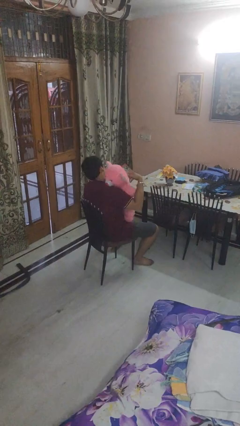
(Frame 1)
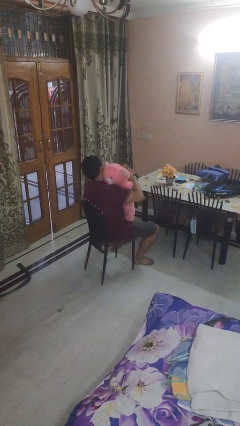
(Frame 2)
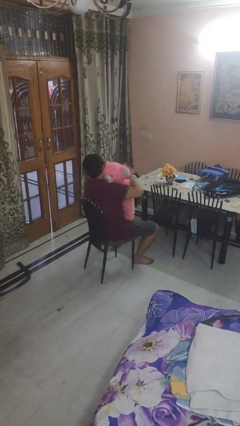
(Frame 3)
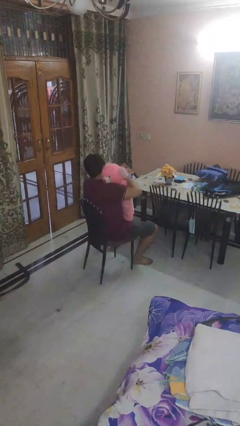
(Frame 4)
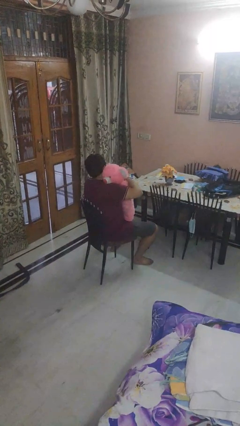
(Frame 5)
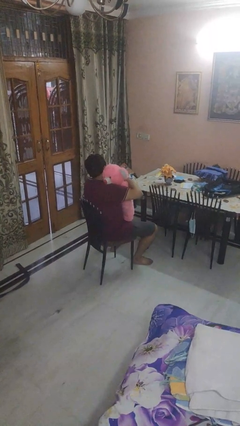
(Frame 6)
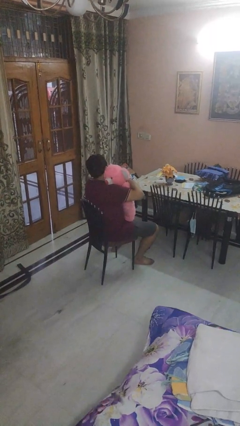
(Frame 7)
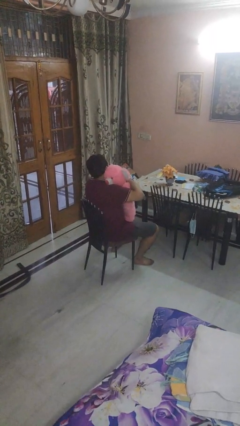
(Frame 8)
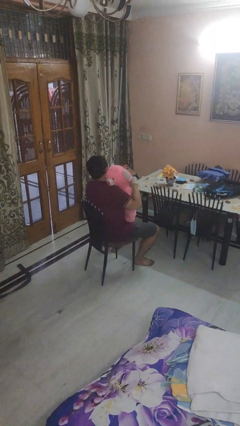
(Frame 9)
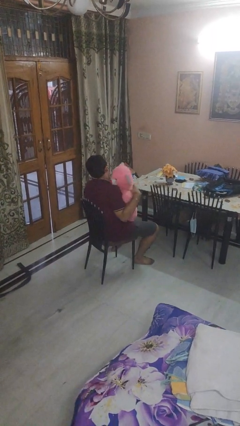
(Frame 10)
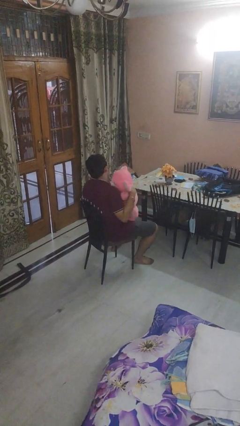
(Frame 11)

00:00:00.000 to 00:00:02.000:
person hugs stuffed animal

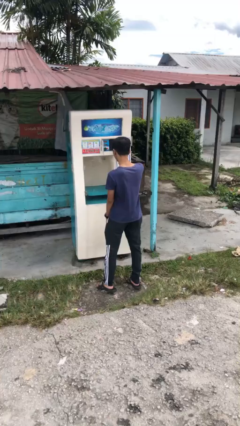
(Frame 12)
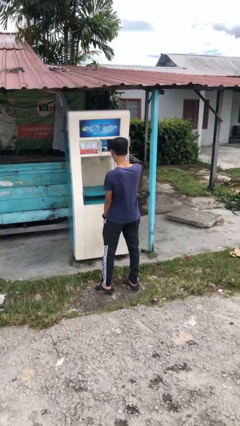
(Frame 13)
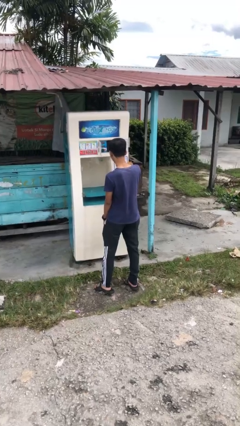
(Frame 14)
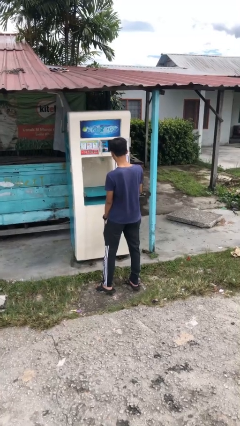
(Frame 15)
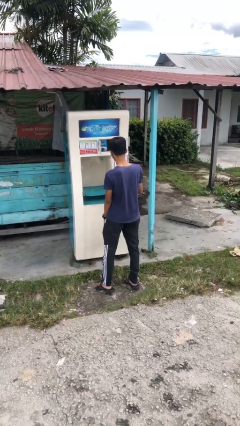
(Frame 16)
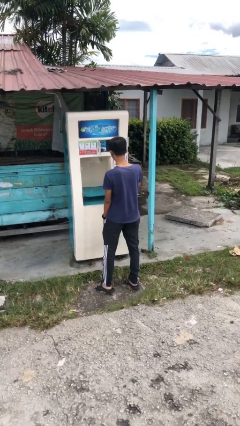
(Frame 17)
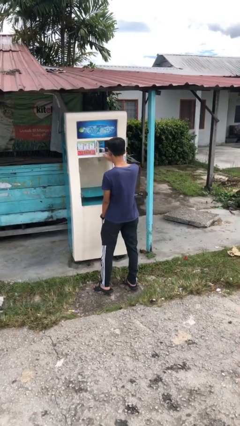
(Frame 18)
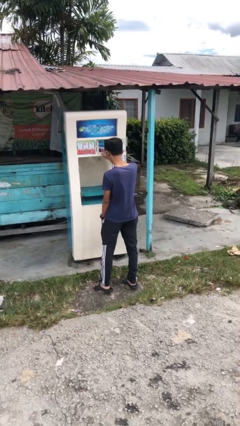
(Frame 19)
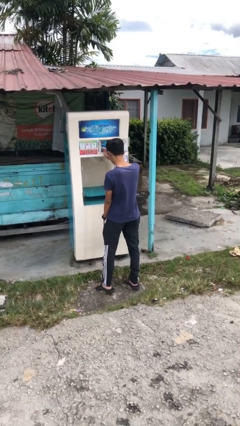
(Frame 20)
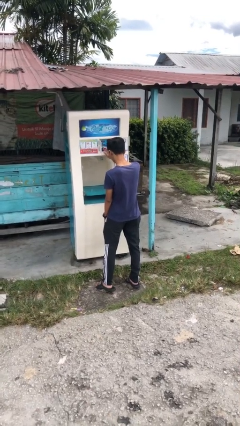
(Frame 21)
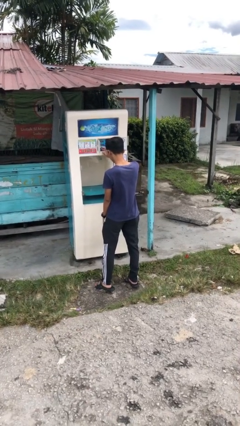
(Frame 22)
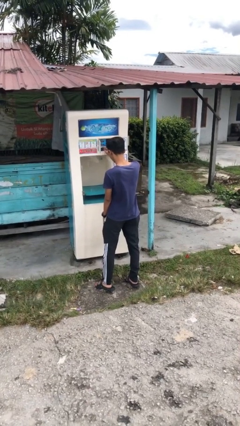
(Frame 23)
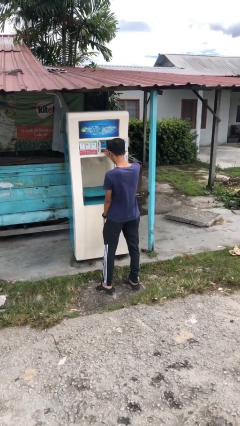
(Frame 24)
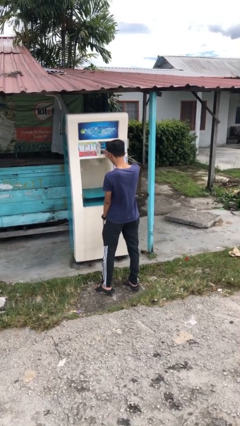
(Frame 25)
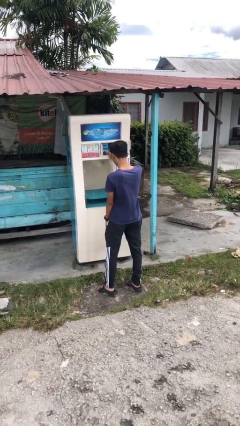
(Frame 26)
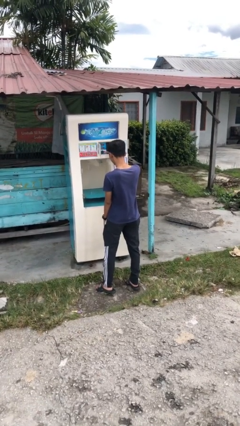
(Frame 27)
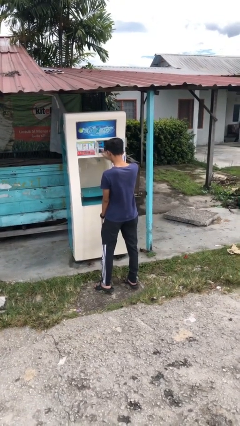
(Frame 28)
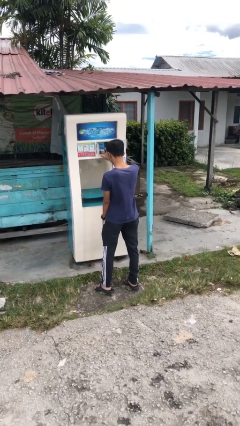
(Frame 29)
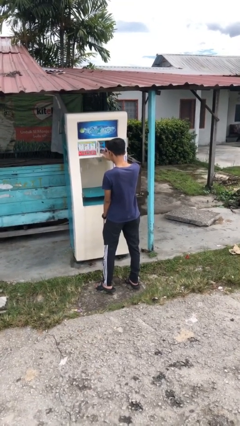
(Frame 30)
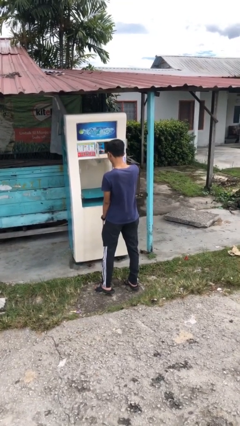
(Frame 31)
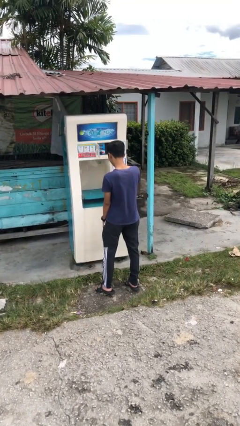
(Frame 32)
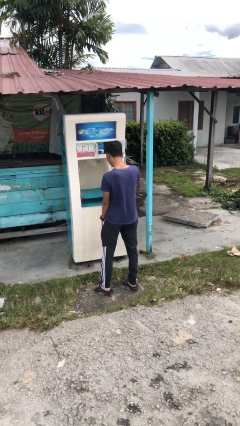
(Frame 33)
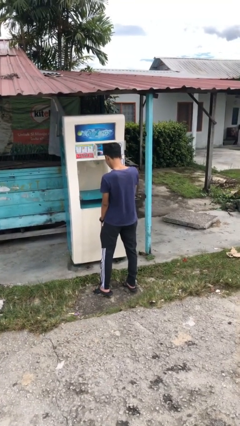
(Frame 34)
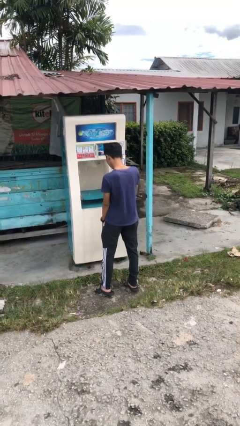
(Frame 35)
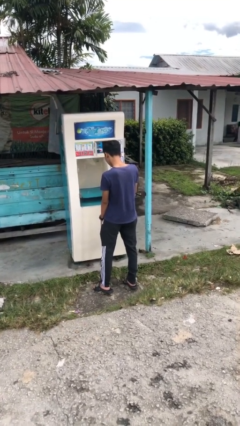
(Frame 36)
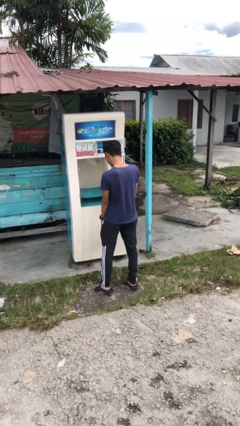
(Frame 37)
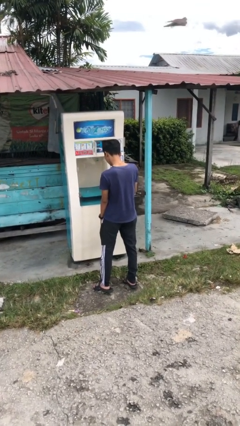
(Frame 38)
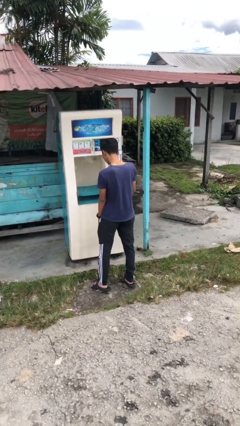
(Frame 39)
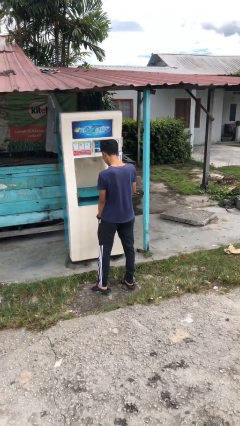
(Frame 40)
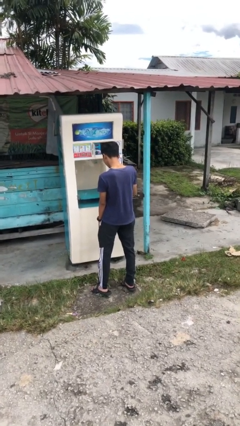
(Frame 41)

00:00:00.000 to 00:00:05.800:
person purchases from machine

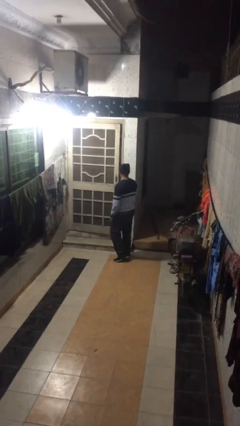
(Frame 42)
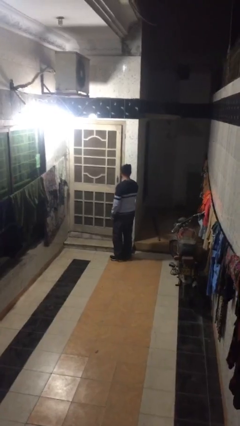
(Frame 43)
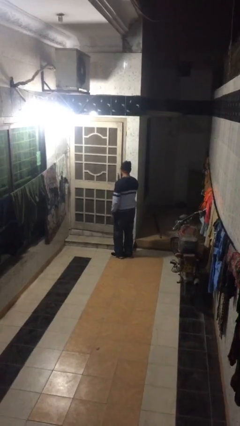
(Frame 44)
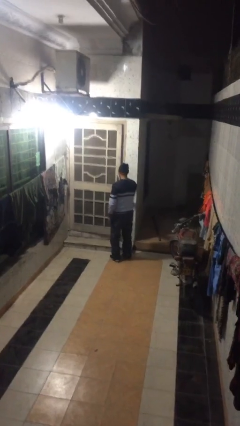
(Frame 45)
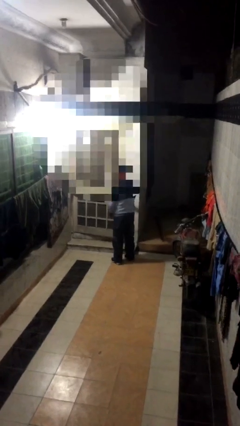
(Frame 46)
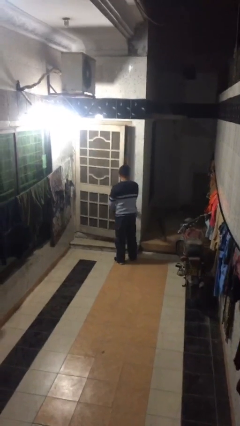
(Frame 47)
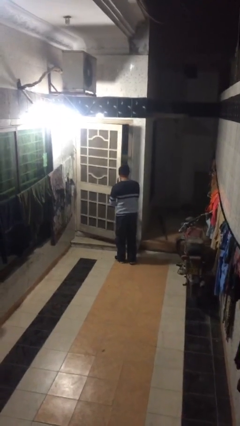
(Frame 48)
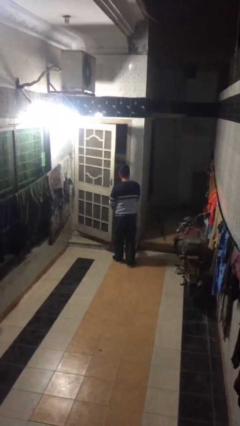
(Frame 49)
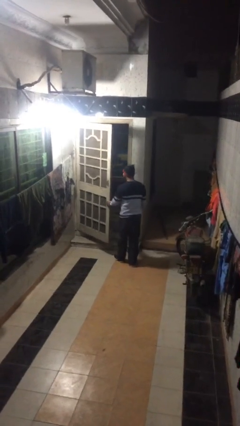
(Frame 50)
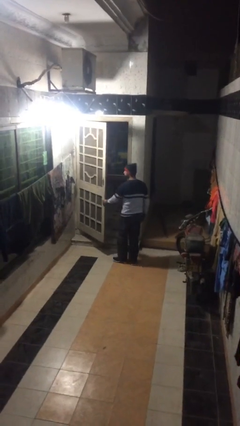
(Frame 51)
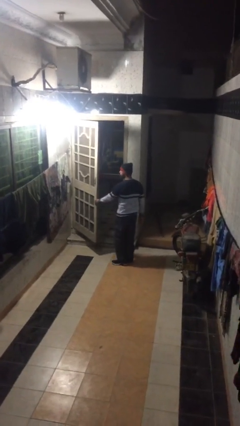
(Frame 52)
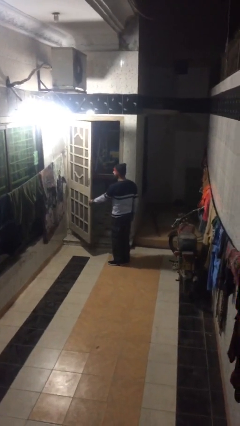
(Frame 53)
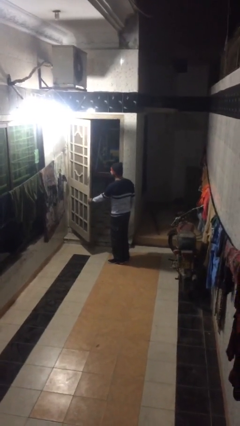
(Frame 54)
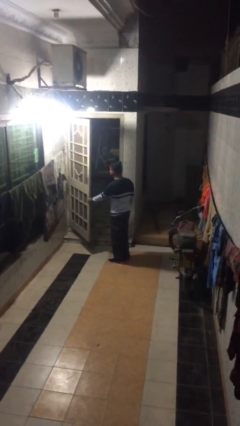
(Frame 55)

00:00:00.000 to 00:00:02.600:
person opens facility door

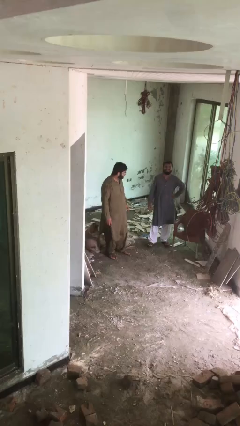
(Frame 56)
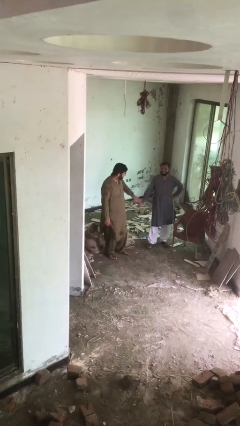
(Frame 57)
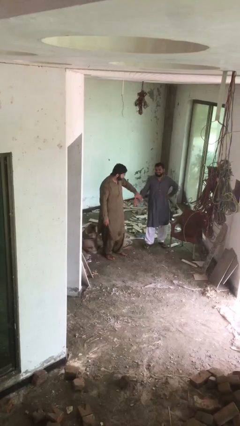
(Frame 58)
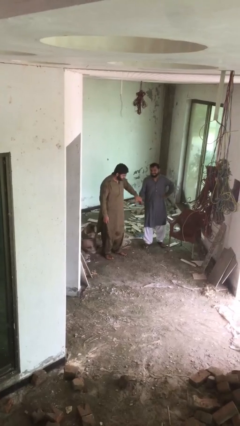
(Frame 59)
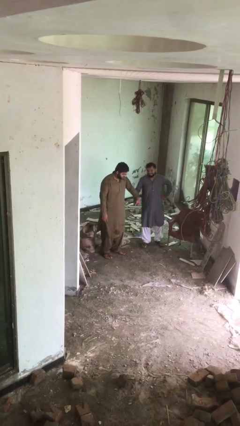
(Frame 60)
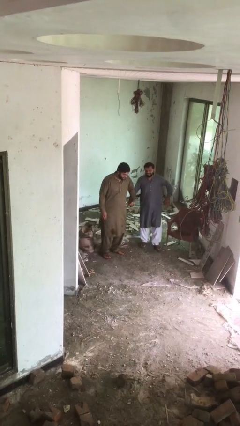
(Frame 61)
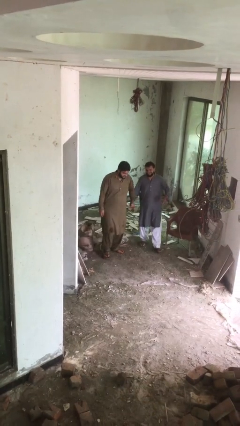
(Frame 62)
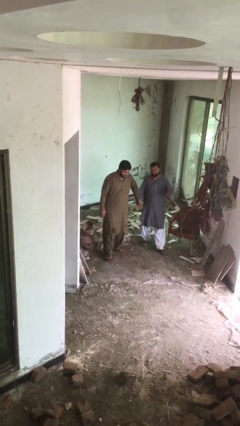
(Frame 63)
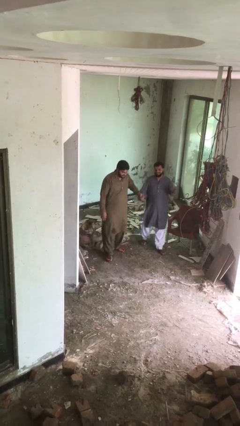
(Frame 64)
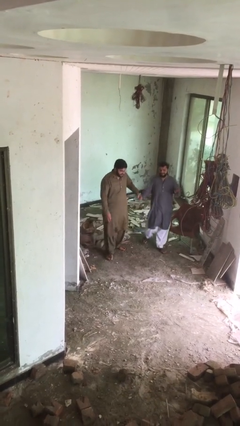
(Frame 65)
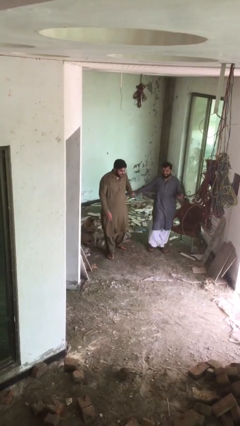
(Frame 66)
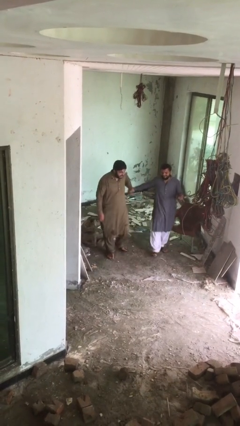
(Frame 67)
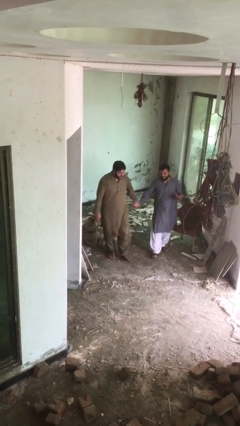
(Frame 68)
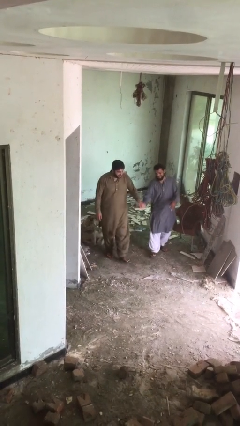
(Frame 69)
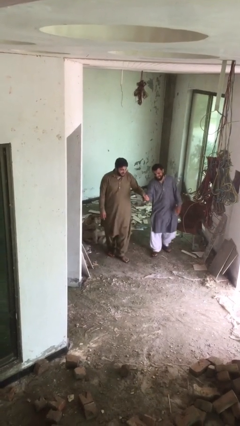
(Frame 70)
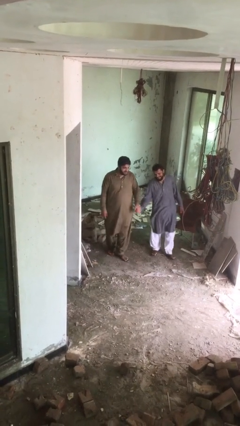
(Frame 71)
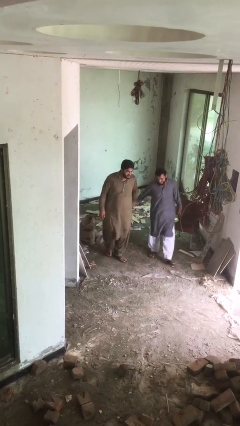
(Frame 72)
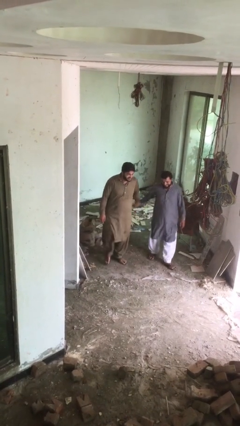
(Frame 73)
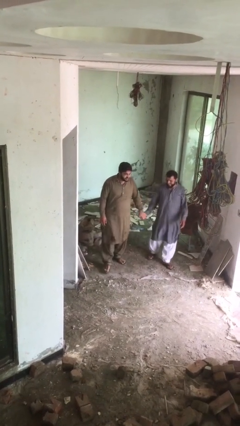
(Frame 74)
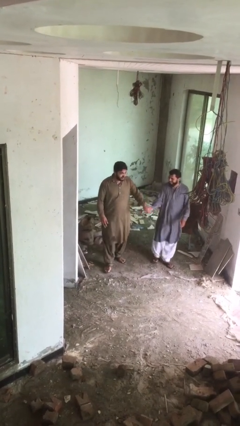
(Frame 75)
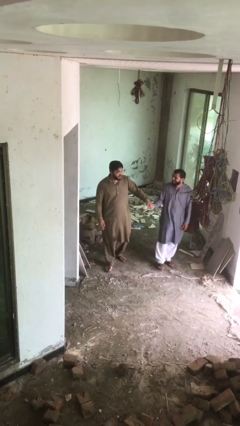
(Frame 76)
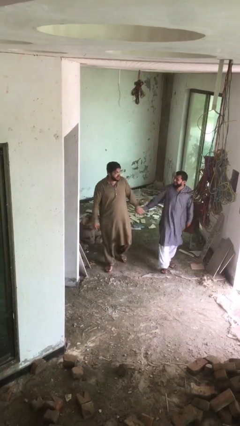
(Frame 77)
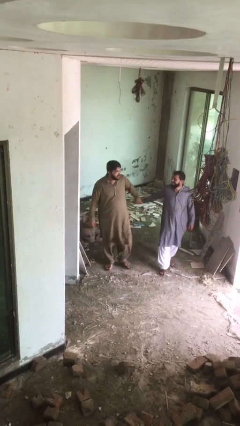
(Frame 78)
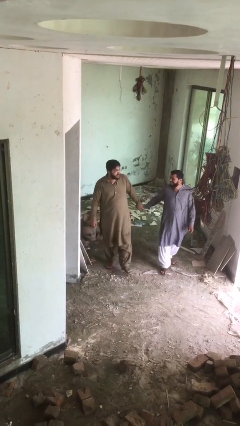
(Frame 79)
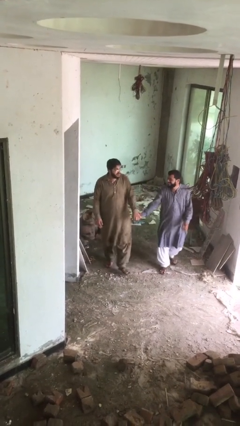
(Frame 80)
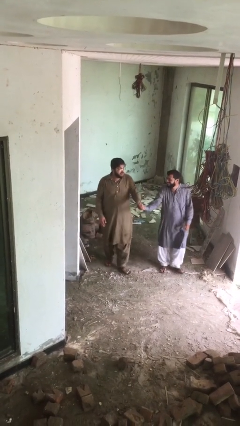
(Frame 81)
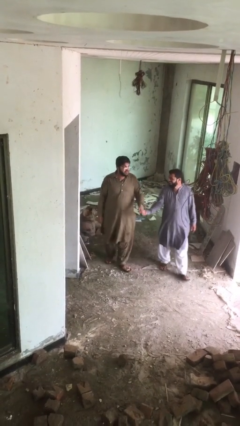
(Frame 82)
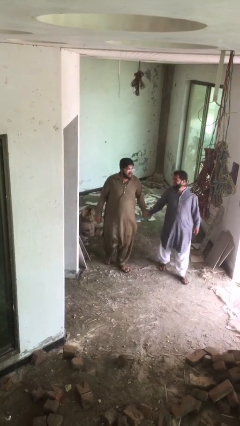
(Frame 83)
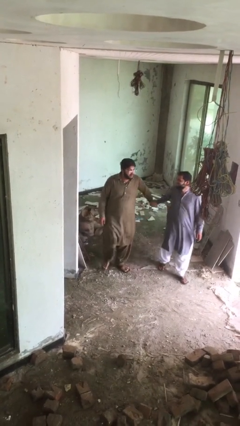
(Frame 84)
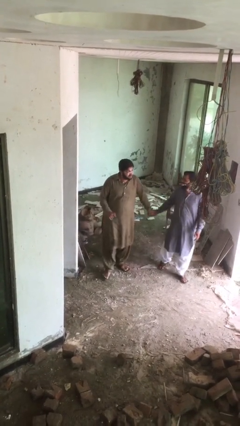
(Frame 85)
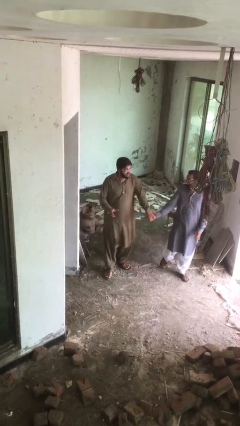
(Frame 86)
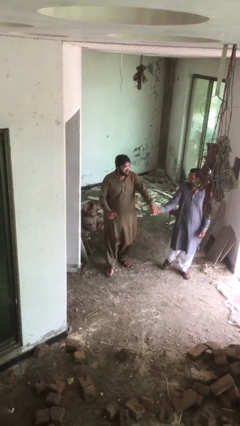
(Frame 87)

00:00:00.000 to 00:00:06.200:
person holds hand

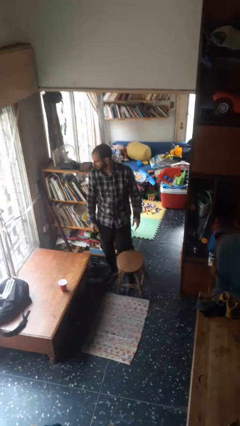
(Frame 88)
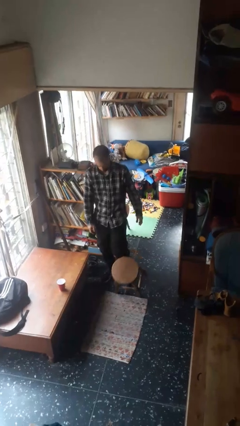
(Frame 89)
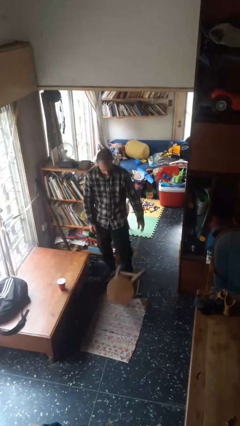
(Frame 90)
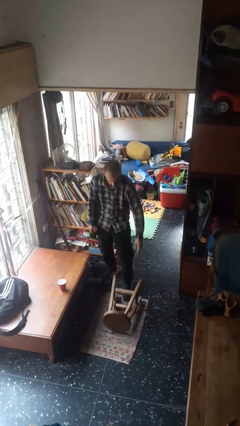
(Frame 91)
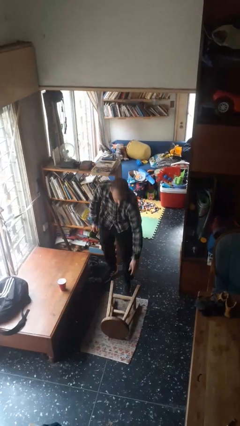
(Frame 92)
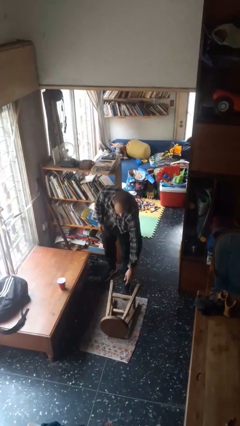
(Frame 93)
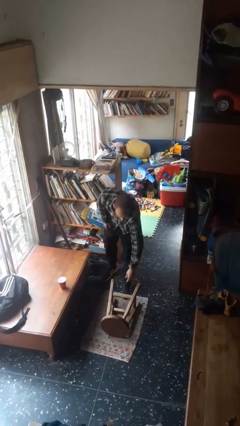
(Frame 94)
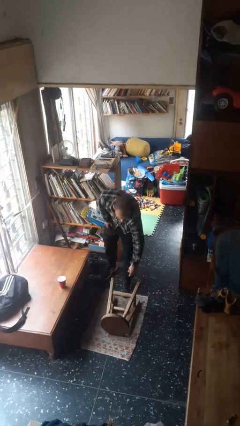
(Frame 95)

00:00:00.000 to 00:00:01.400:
person knocks over furniture
